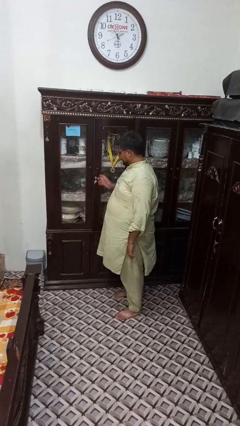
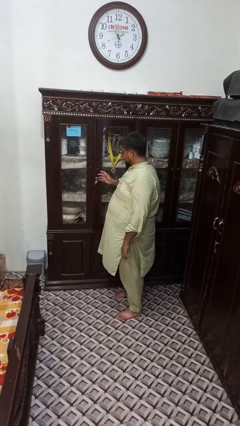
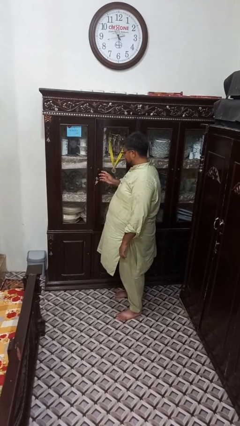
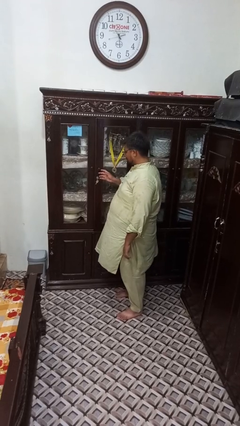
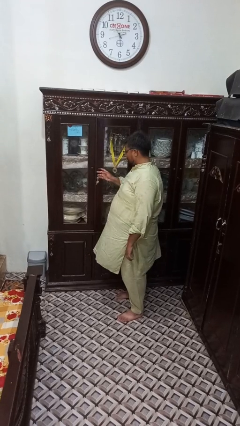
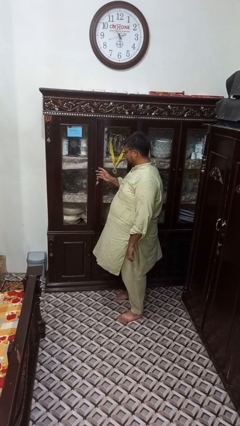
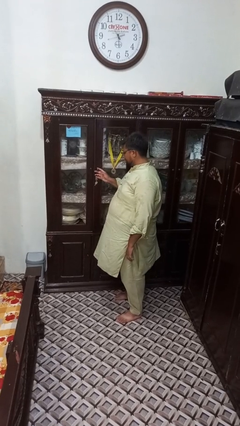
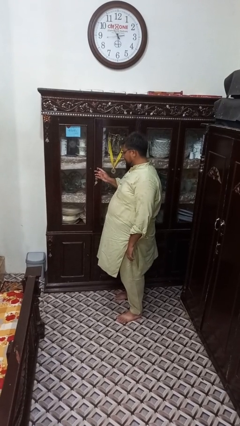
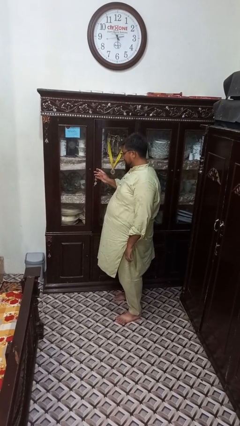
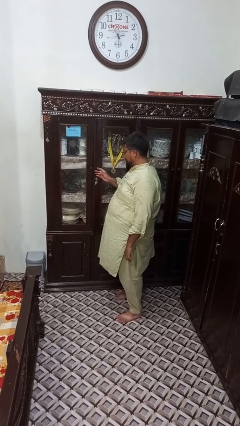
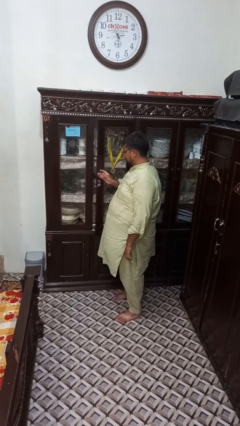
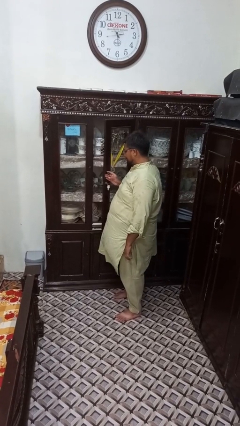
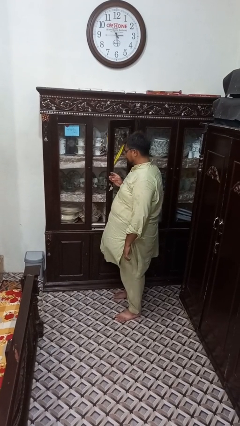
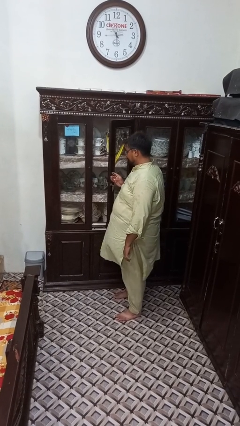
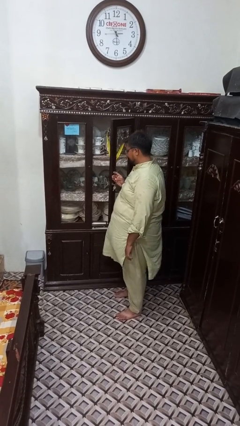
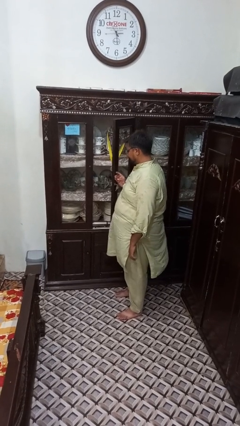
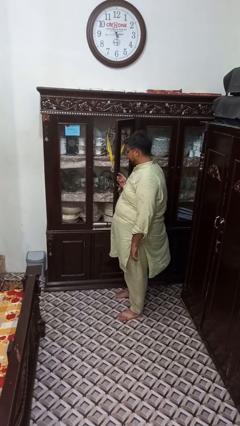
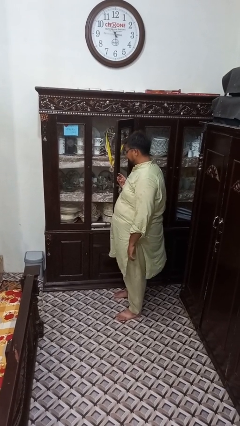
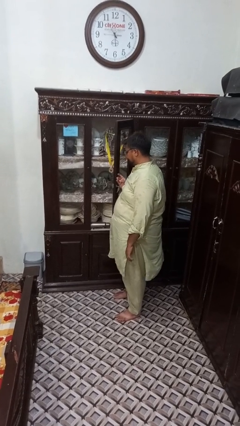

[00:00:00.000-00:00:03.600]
person opens cabinet

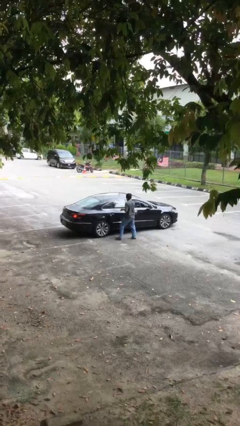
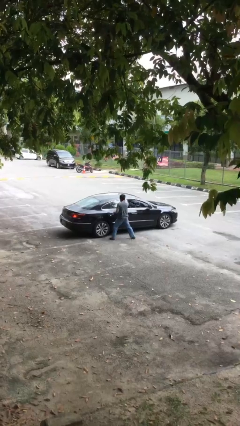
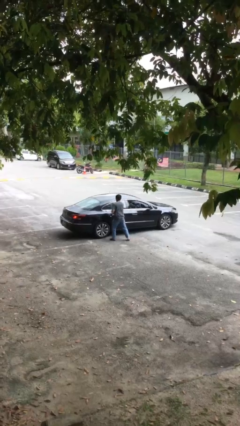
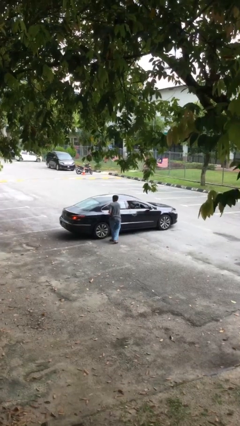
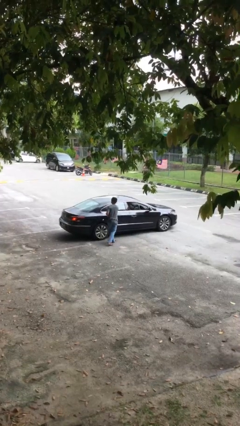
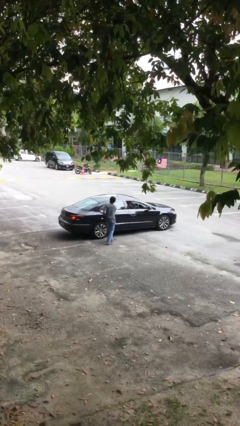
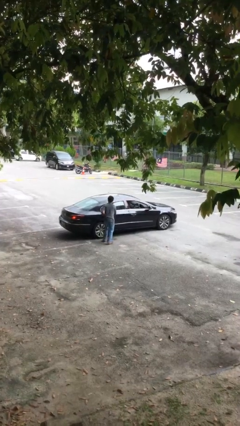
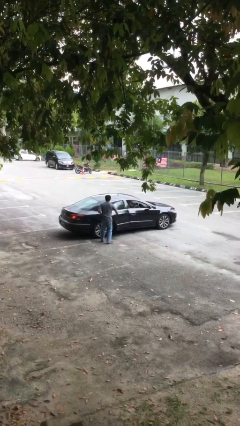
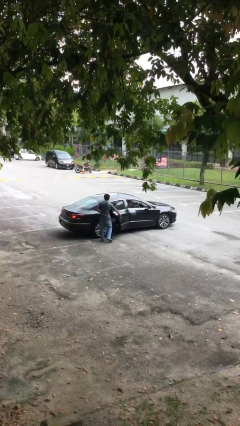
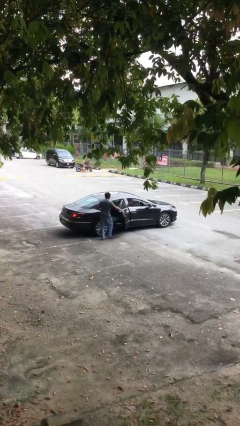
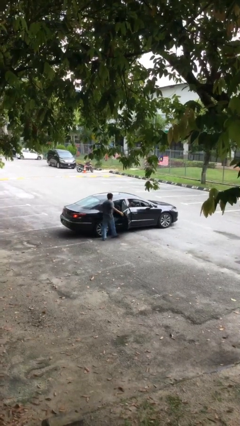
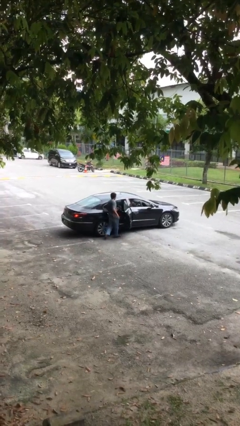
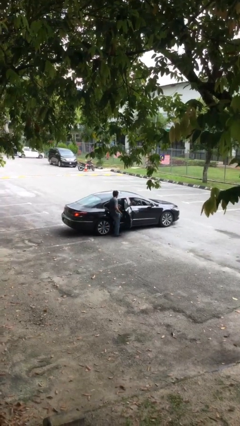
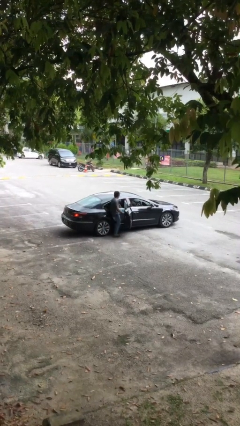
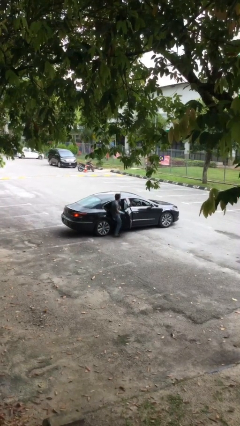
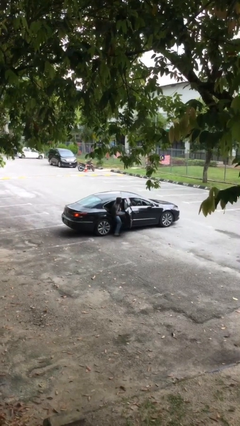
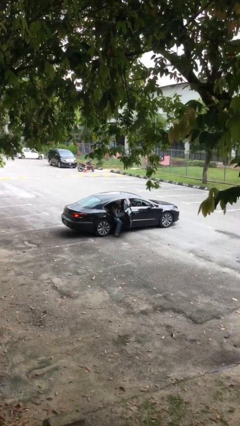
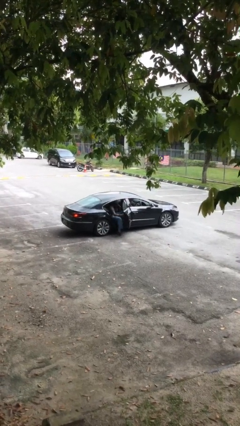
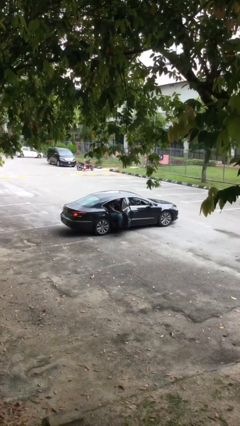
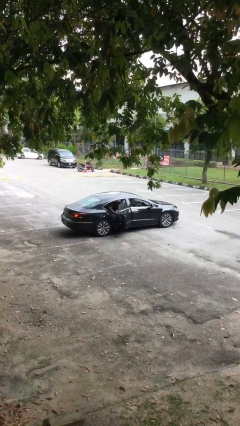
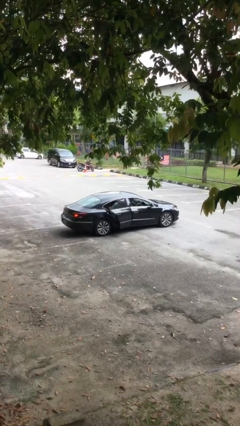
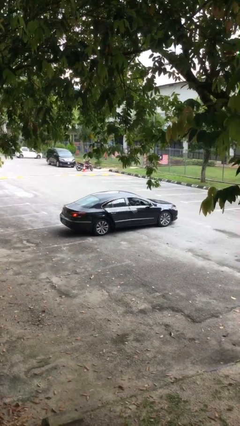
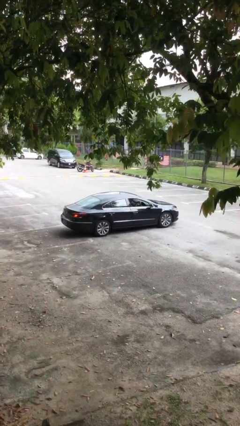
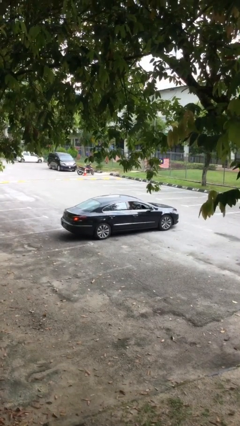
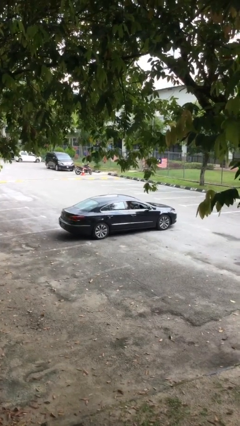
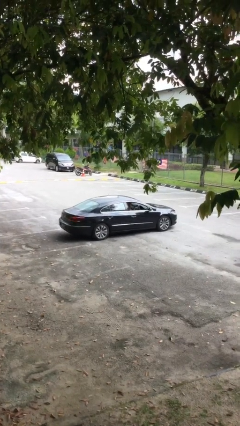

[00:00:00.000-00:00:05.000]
car picks up person

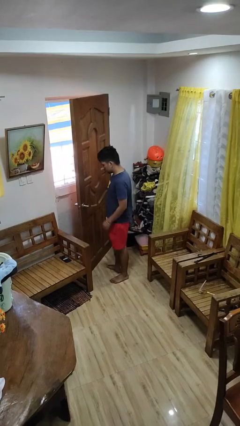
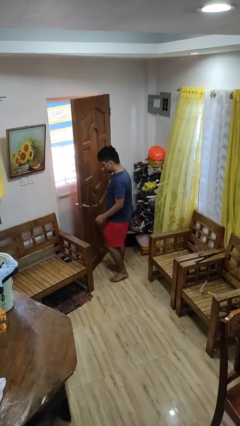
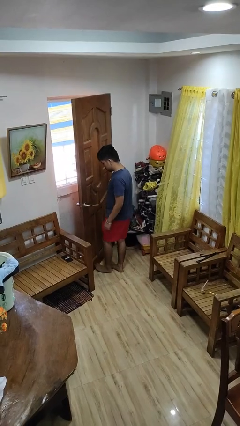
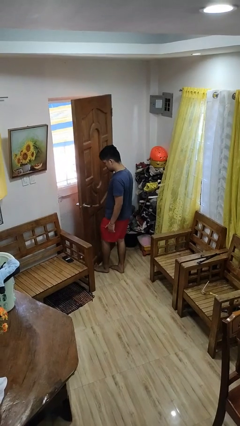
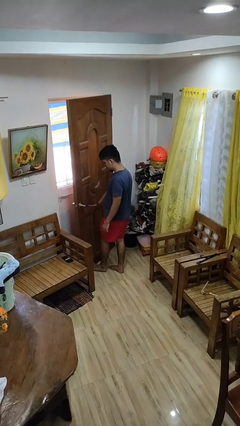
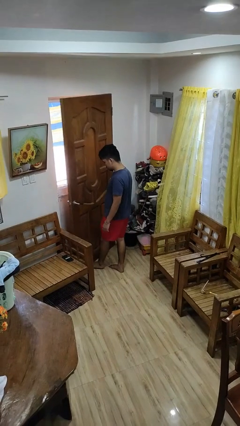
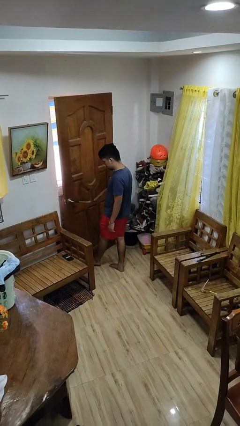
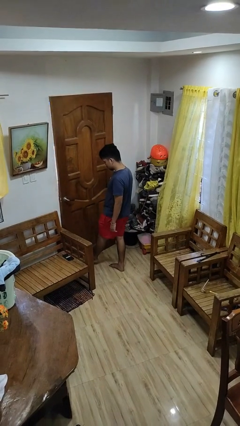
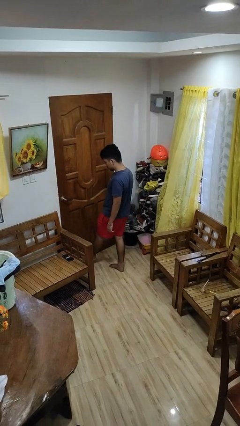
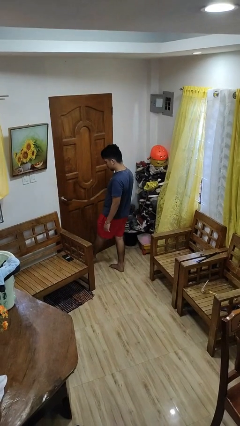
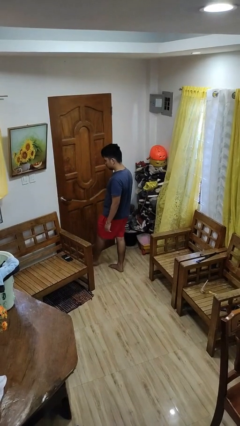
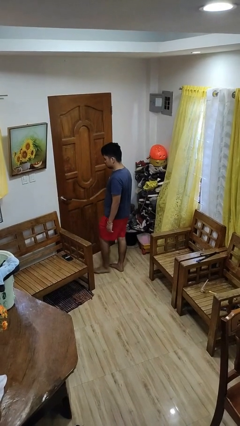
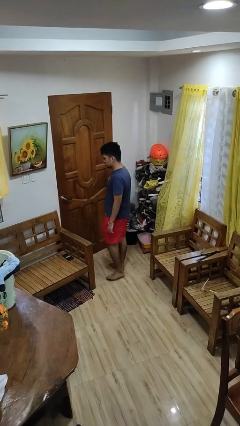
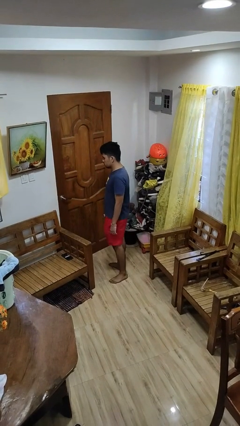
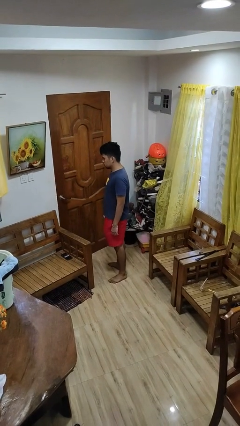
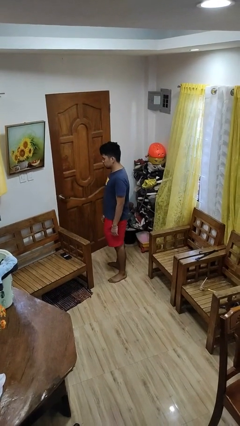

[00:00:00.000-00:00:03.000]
person closes door with foot

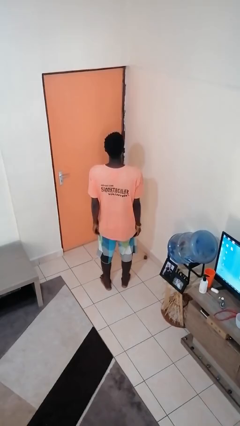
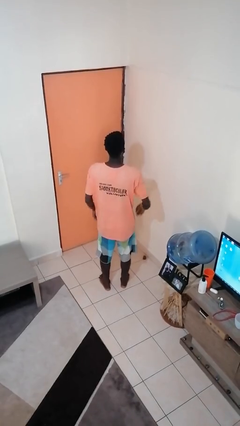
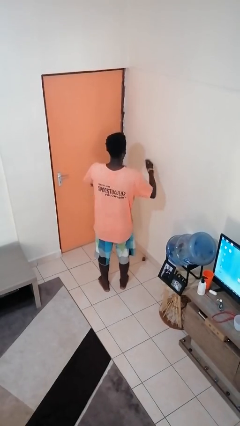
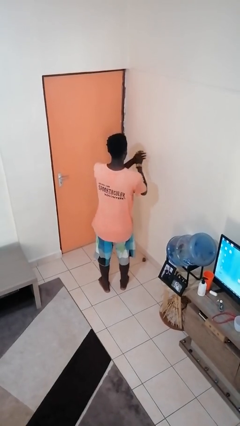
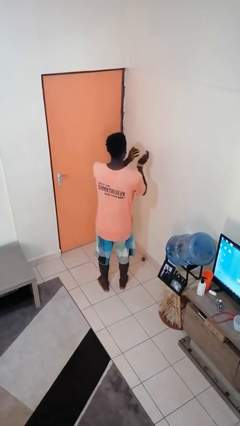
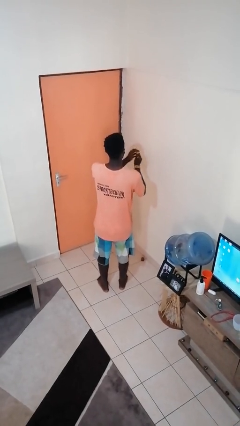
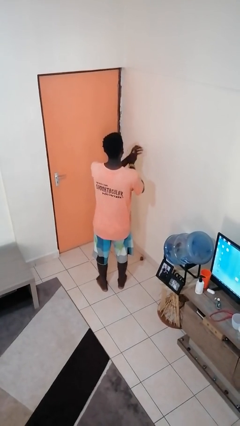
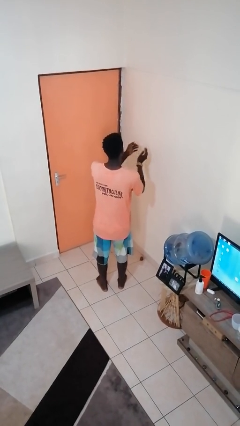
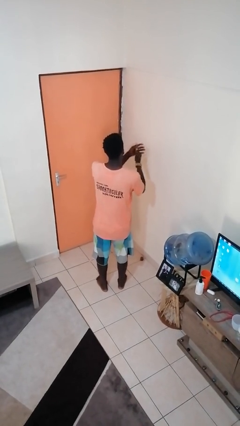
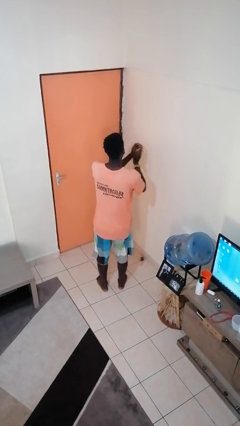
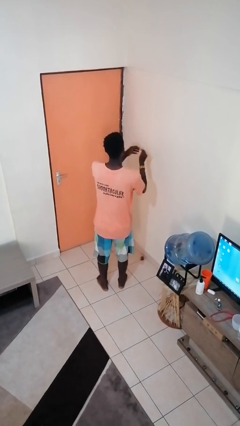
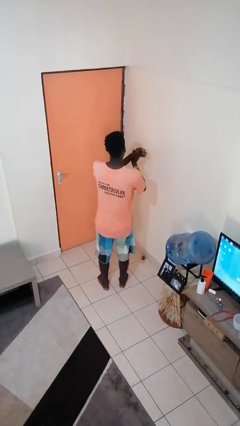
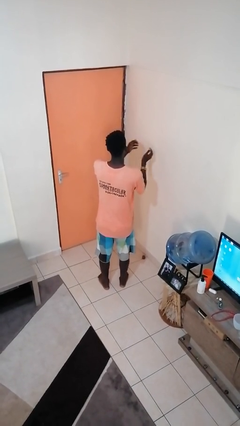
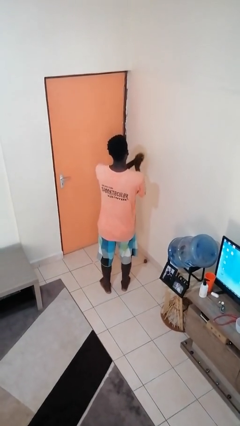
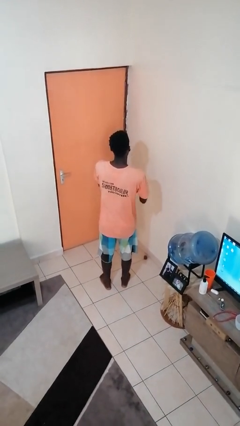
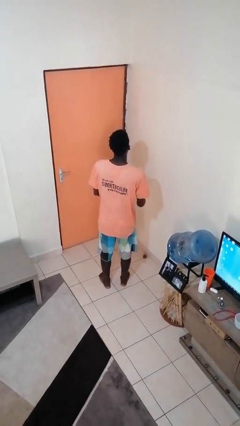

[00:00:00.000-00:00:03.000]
person claps hands

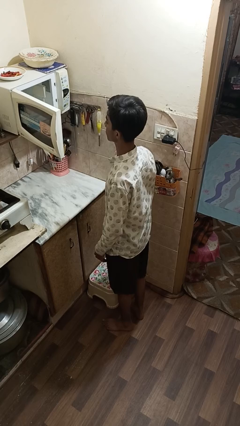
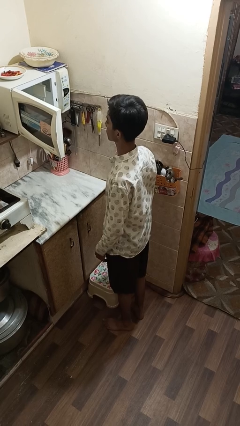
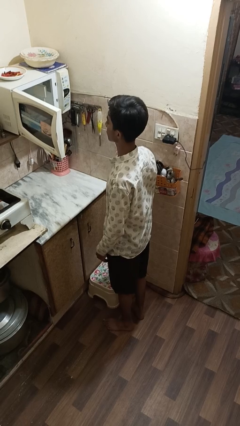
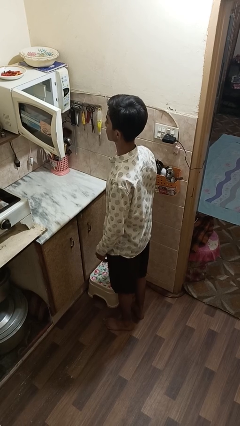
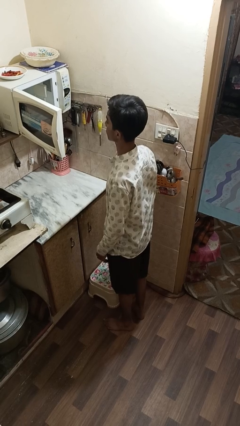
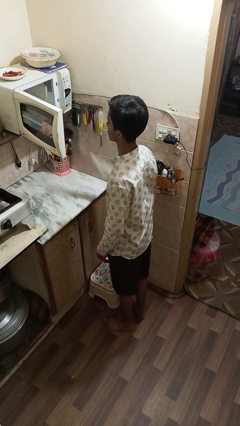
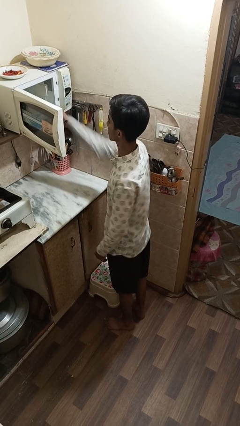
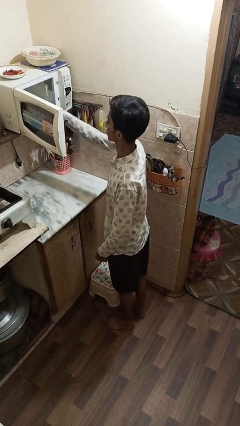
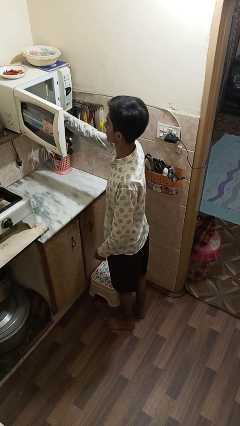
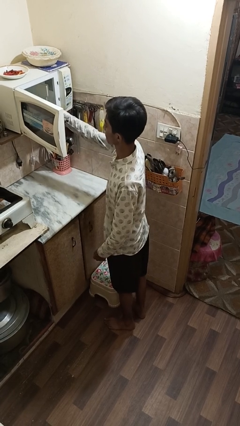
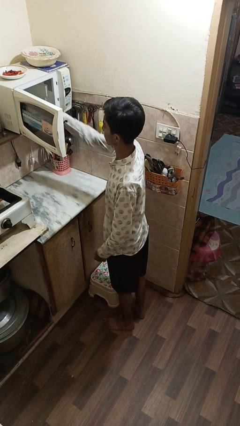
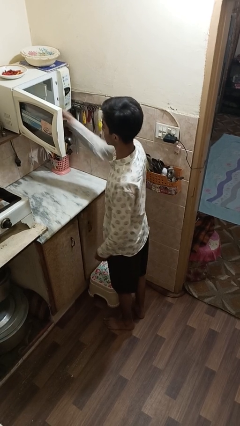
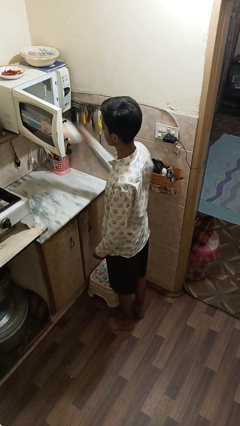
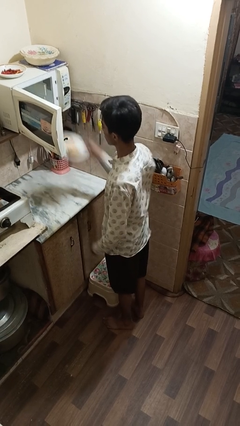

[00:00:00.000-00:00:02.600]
person takes object from microwave

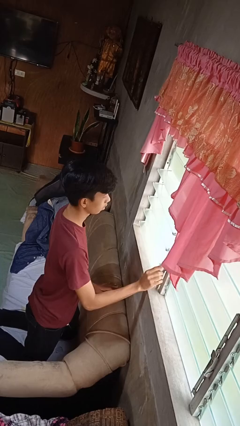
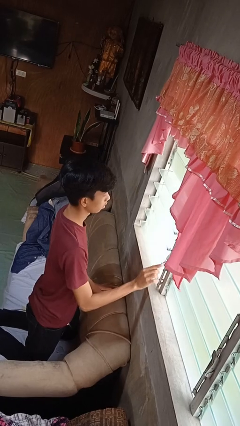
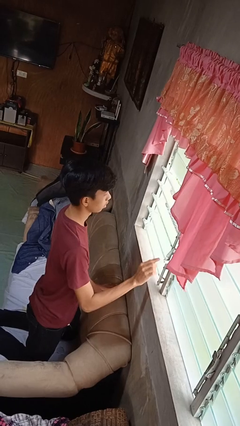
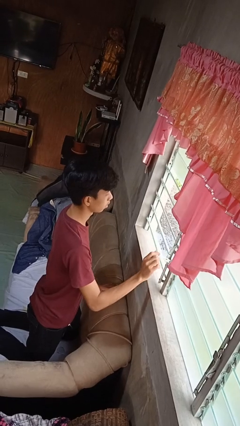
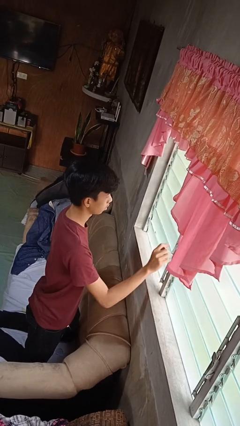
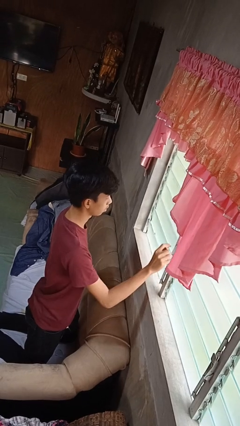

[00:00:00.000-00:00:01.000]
person closes home window
